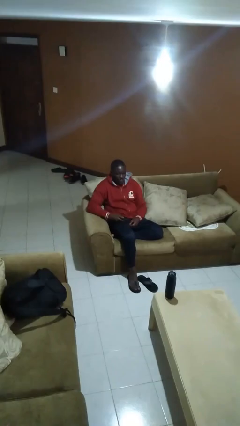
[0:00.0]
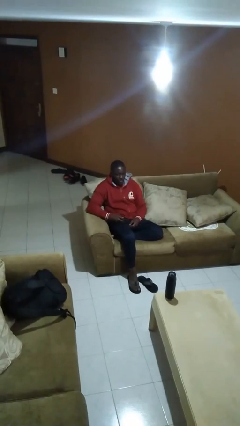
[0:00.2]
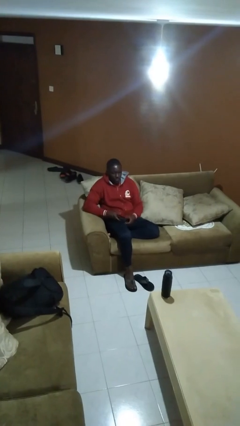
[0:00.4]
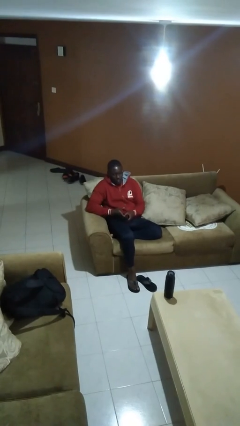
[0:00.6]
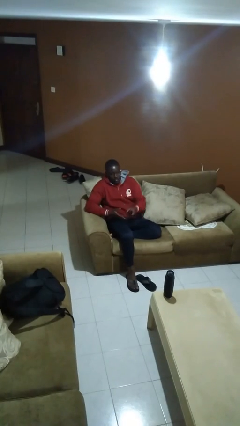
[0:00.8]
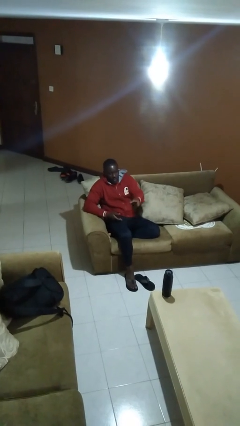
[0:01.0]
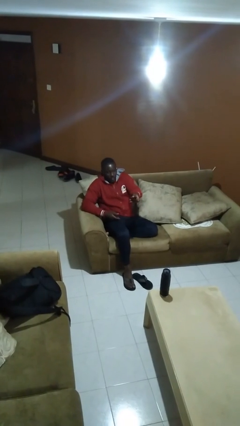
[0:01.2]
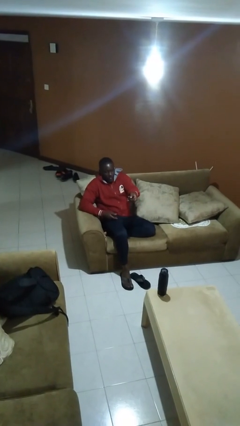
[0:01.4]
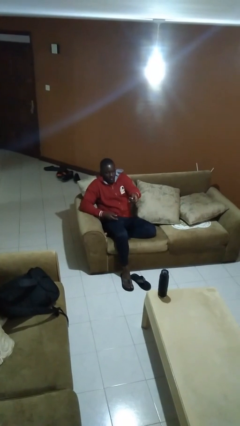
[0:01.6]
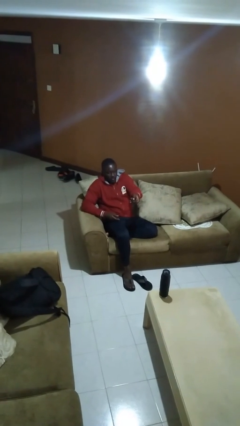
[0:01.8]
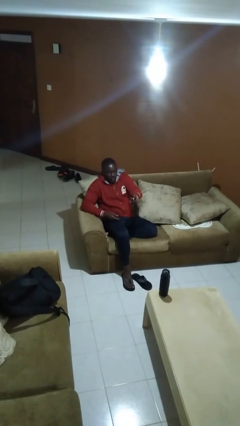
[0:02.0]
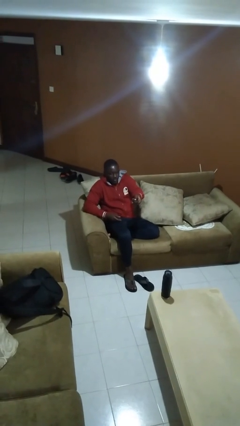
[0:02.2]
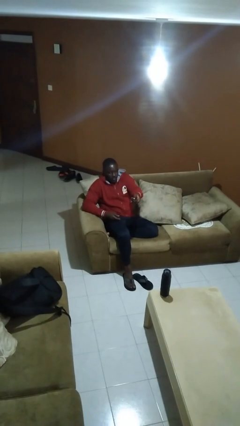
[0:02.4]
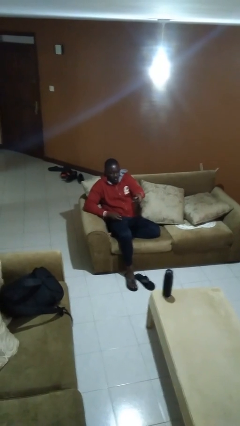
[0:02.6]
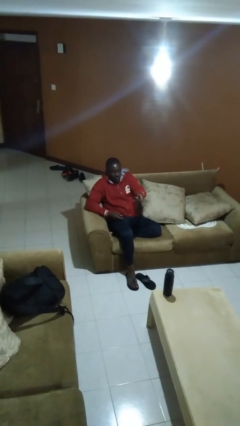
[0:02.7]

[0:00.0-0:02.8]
person uses television remote

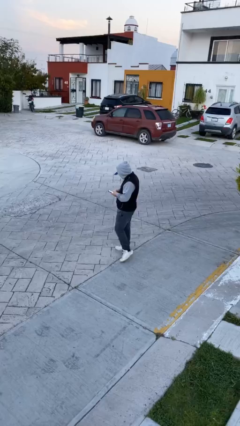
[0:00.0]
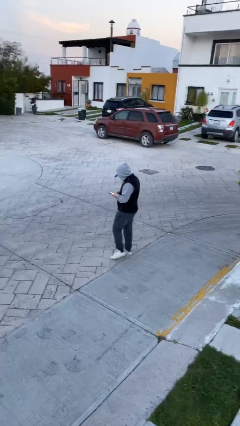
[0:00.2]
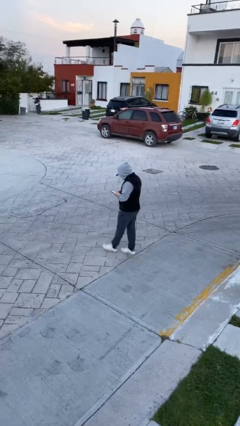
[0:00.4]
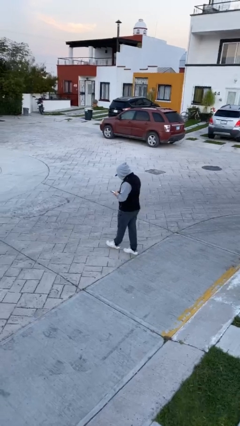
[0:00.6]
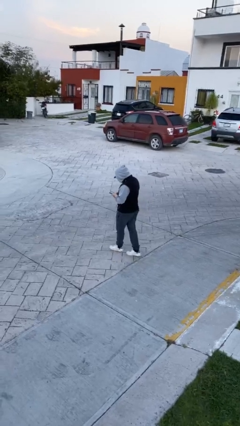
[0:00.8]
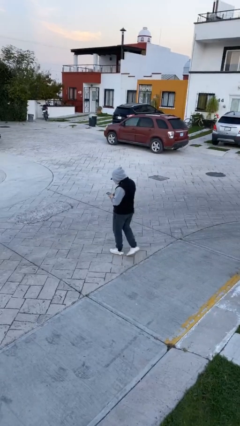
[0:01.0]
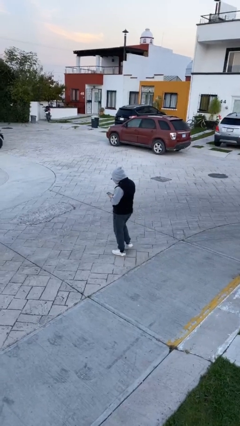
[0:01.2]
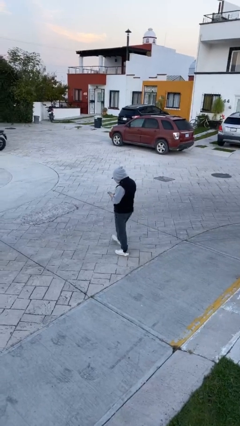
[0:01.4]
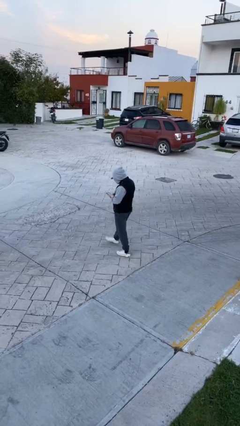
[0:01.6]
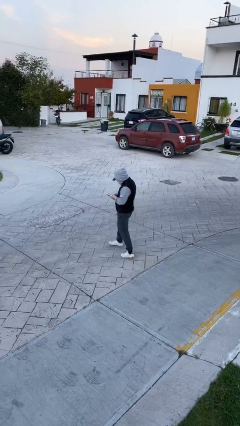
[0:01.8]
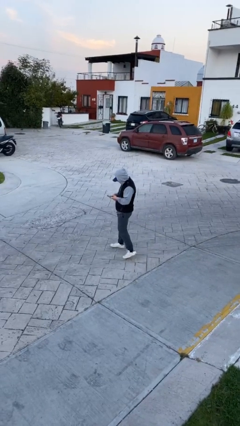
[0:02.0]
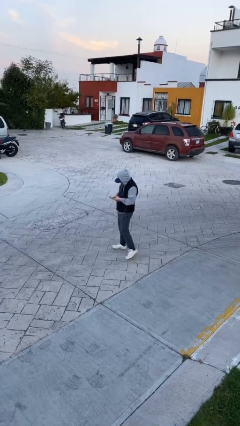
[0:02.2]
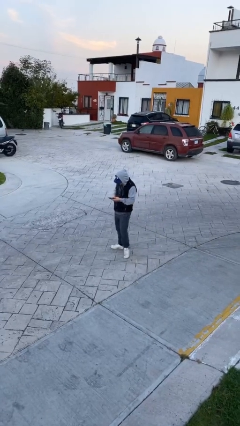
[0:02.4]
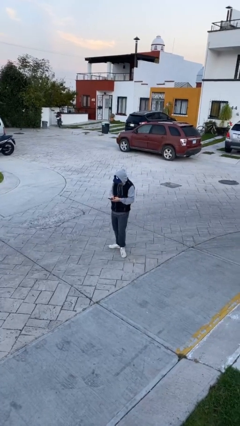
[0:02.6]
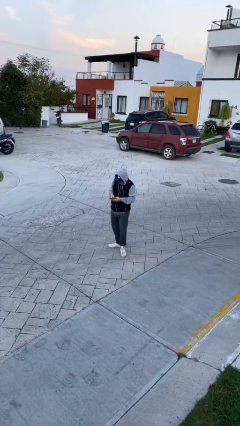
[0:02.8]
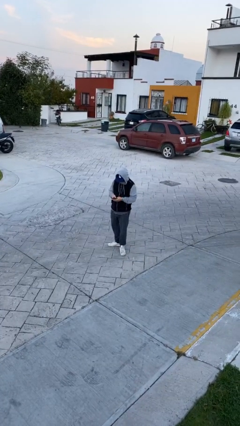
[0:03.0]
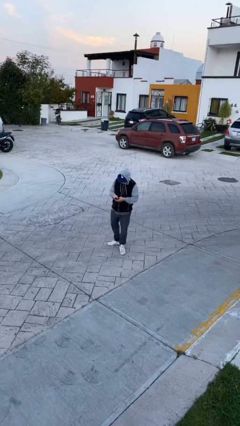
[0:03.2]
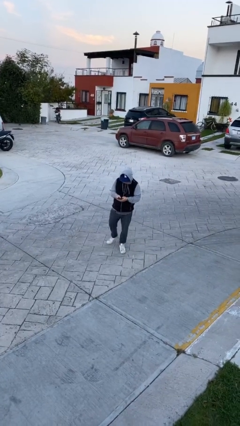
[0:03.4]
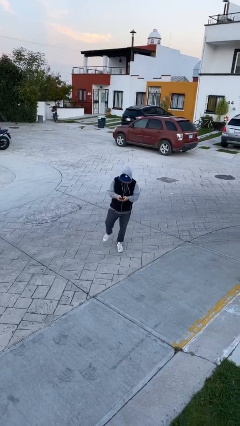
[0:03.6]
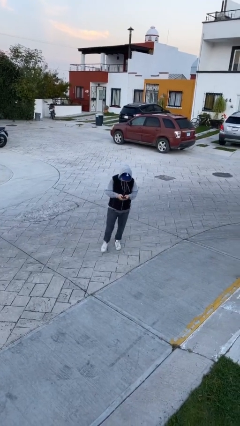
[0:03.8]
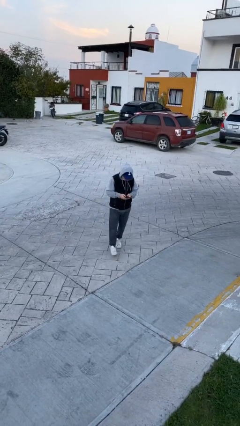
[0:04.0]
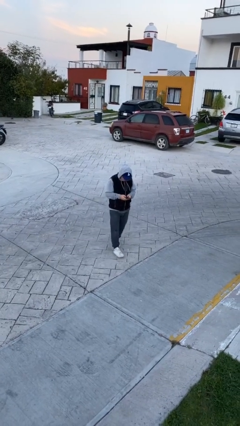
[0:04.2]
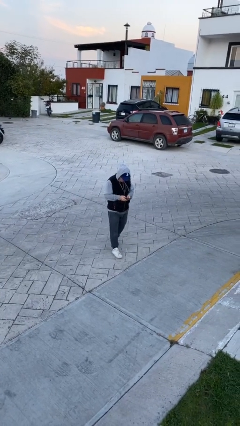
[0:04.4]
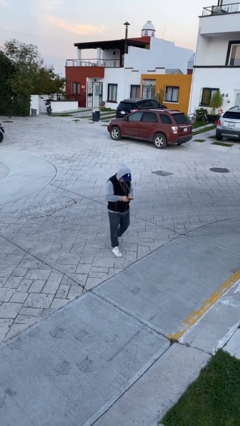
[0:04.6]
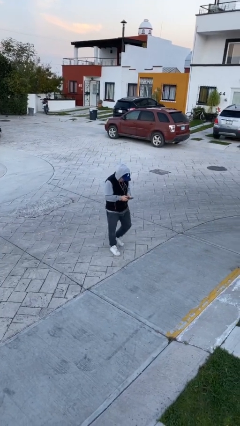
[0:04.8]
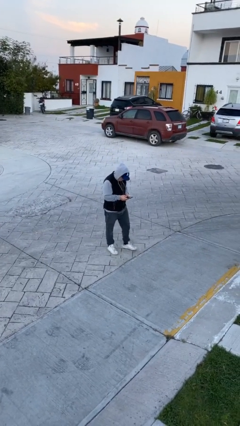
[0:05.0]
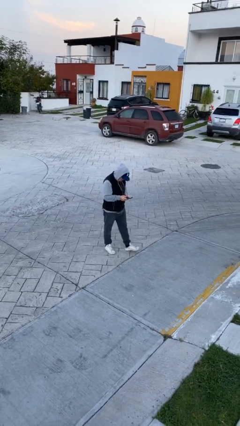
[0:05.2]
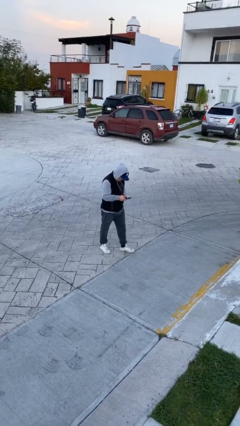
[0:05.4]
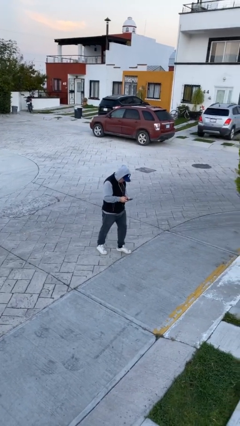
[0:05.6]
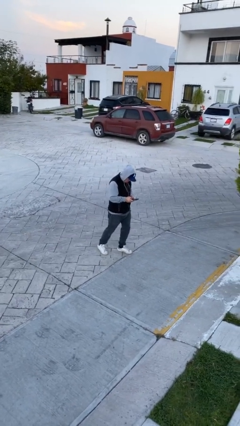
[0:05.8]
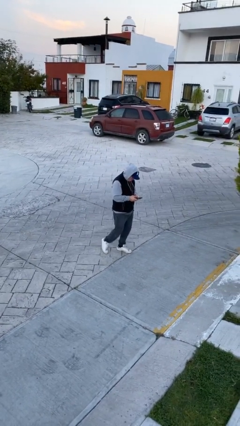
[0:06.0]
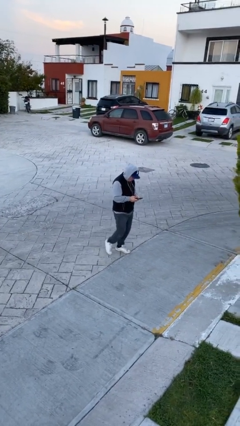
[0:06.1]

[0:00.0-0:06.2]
person texts on phone

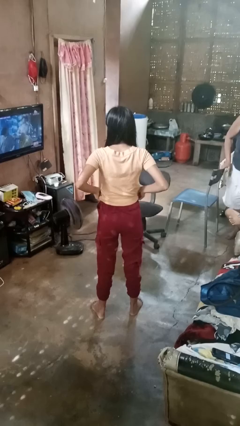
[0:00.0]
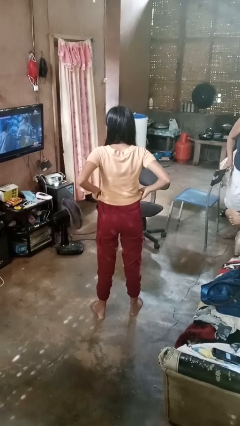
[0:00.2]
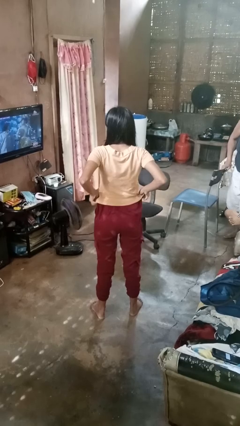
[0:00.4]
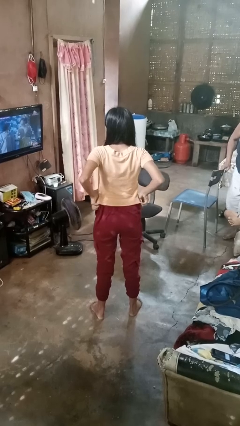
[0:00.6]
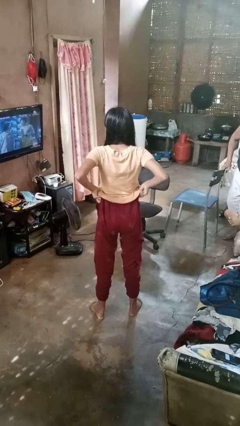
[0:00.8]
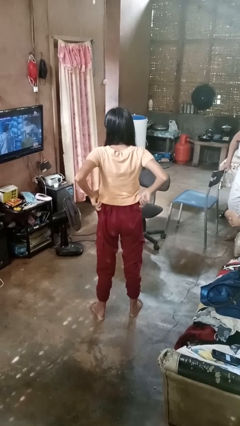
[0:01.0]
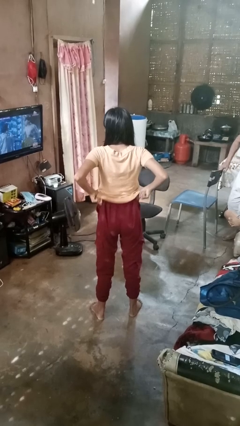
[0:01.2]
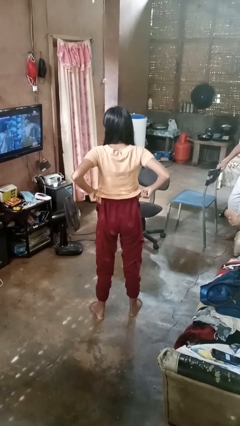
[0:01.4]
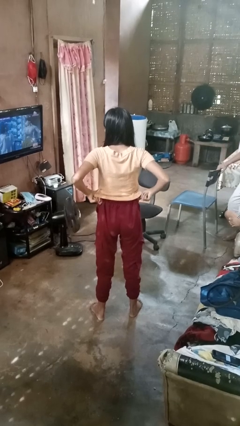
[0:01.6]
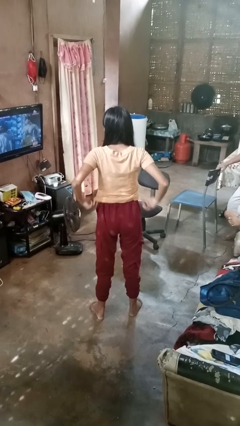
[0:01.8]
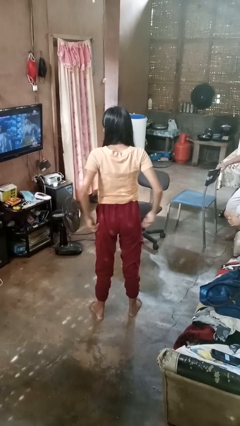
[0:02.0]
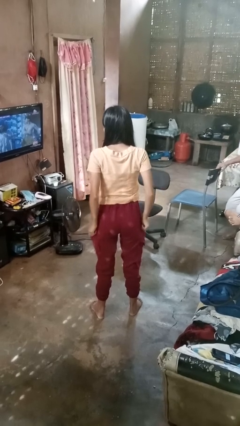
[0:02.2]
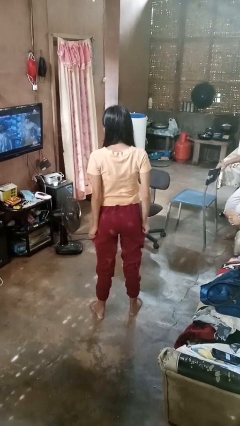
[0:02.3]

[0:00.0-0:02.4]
person hikes up pants

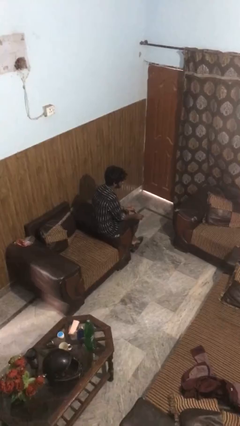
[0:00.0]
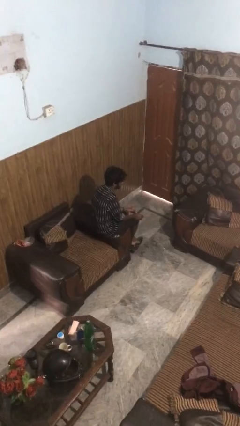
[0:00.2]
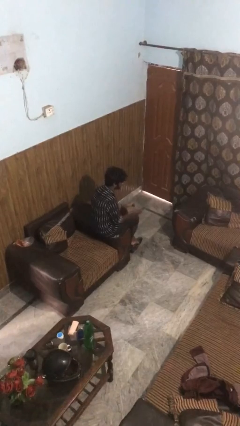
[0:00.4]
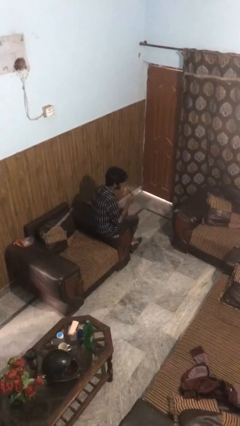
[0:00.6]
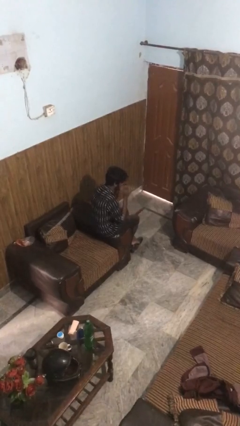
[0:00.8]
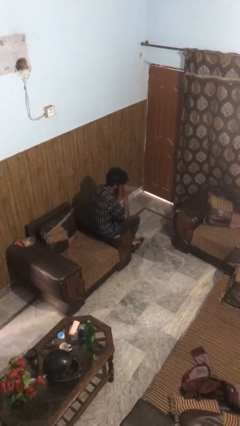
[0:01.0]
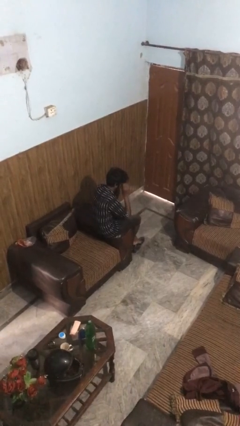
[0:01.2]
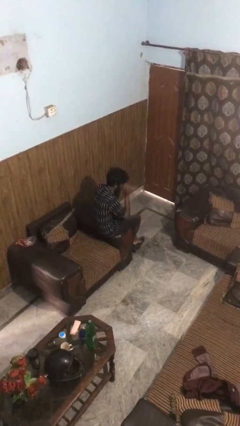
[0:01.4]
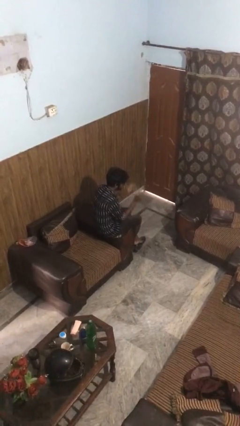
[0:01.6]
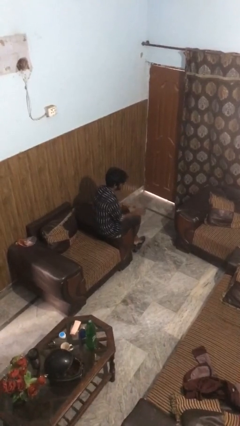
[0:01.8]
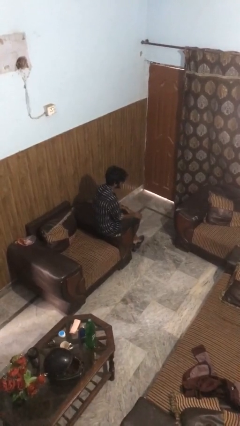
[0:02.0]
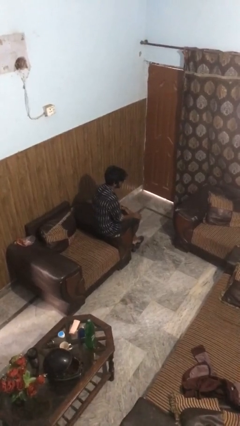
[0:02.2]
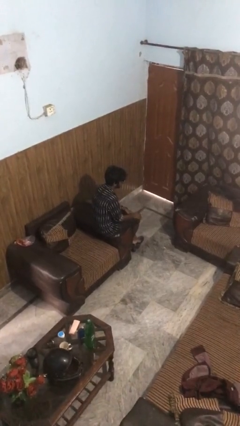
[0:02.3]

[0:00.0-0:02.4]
person puts on sunglasses

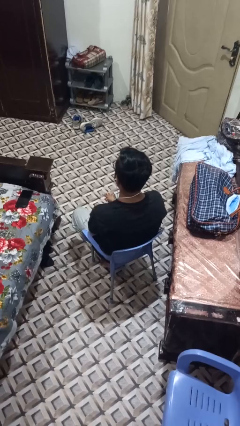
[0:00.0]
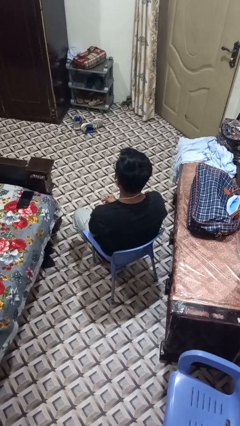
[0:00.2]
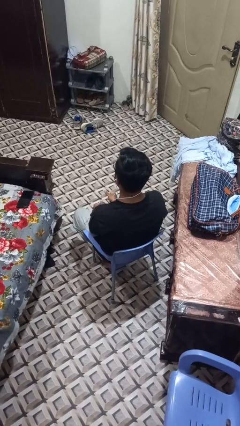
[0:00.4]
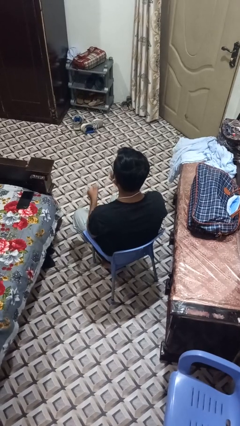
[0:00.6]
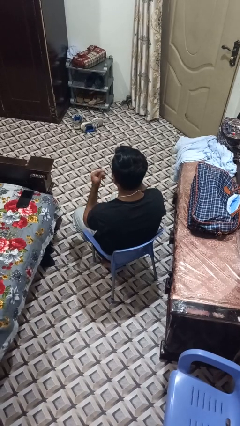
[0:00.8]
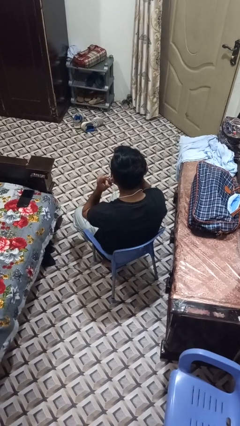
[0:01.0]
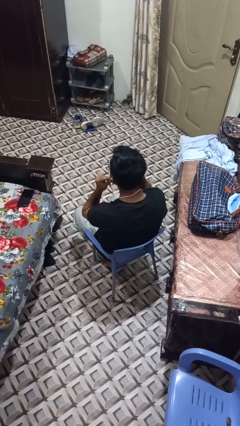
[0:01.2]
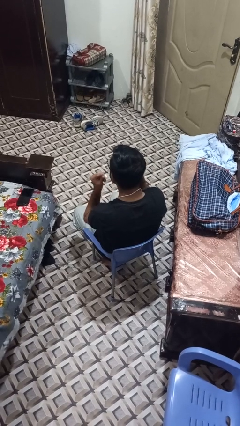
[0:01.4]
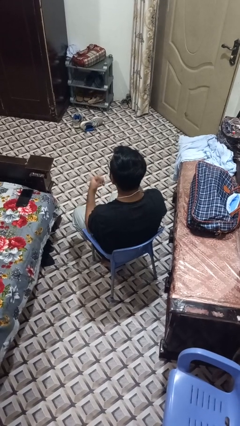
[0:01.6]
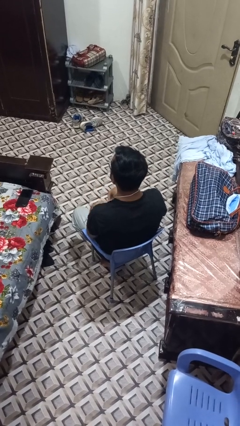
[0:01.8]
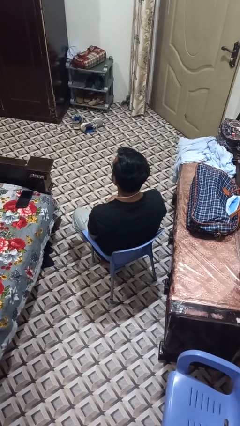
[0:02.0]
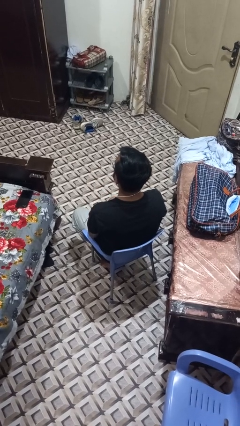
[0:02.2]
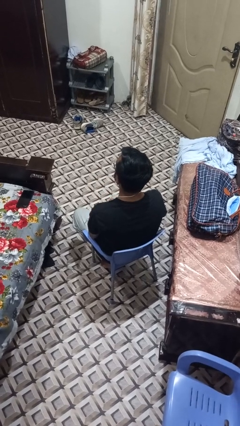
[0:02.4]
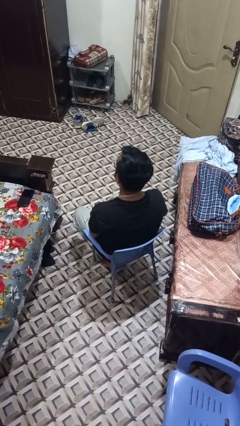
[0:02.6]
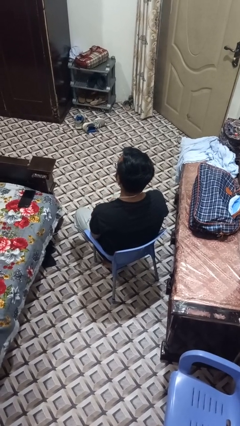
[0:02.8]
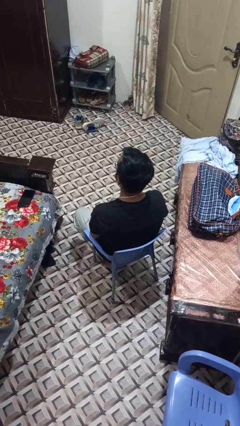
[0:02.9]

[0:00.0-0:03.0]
person takes off headphones

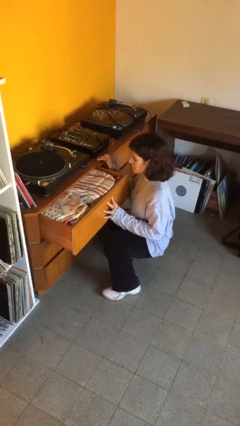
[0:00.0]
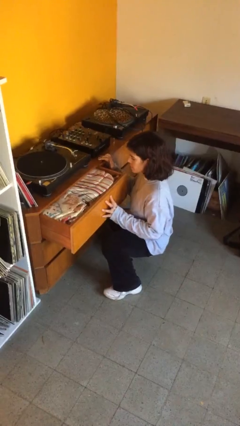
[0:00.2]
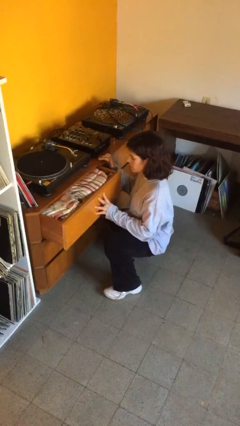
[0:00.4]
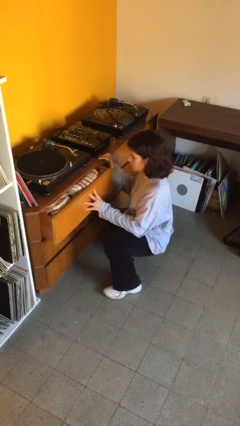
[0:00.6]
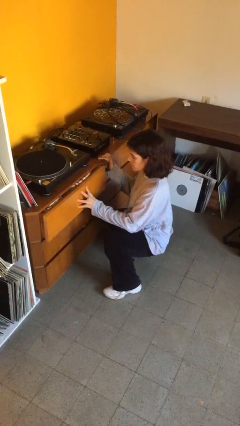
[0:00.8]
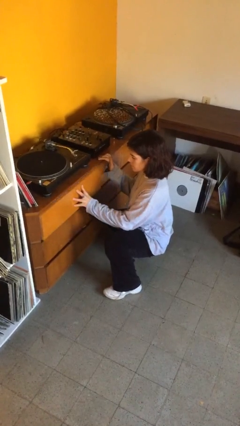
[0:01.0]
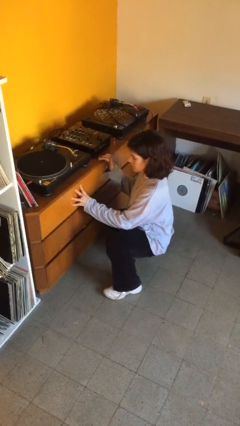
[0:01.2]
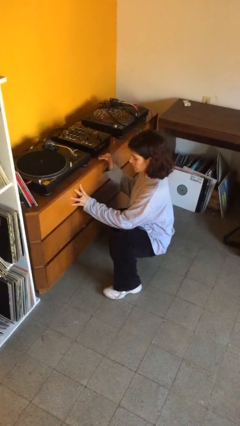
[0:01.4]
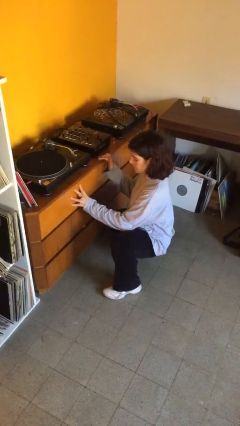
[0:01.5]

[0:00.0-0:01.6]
person closes dresser drawer
